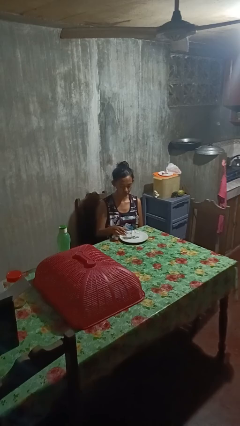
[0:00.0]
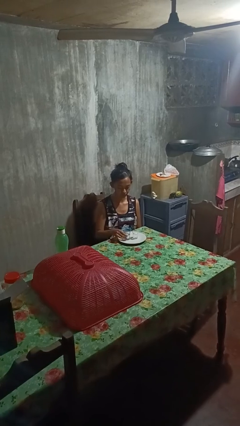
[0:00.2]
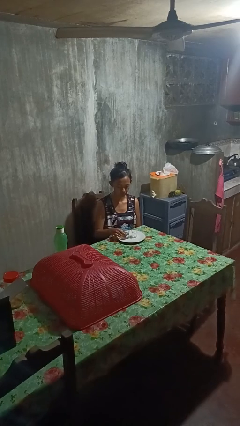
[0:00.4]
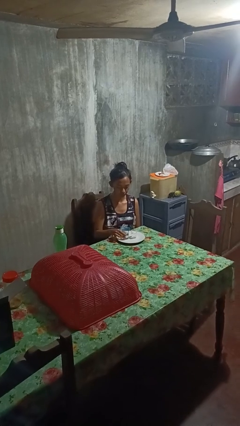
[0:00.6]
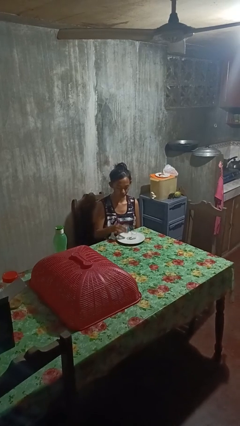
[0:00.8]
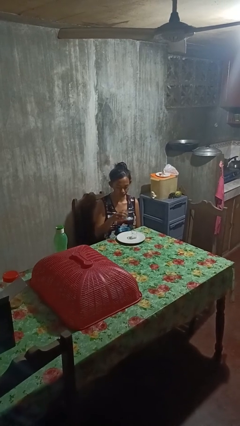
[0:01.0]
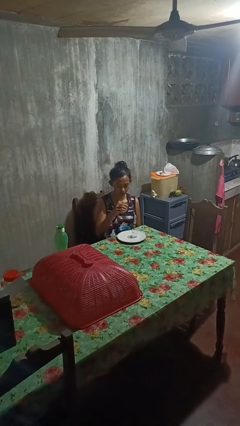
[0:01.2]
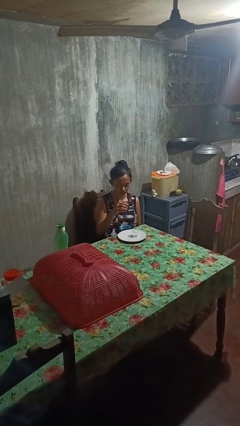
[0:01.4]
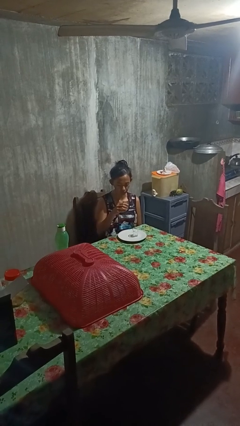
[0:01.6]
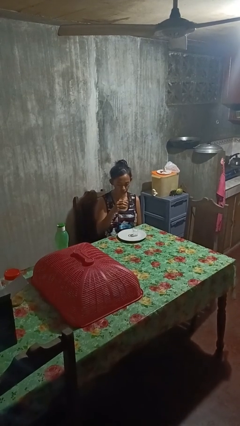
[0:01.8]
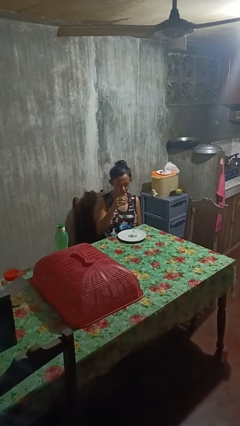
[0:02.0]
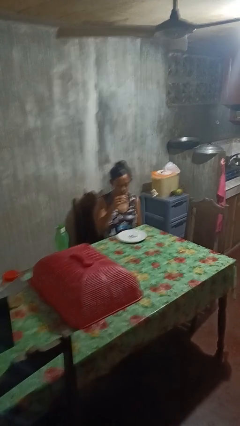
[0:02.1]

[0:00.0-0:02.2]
person picks up object from table

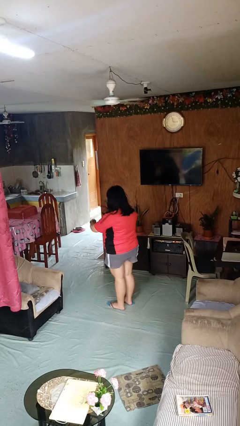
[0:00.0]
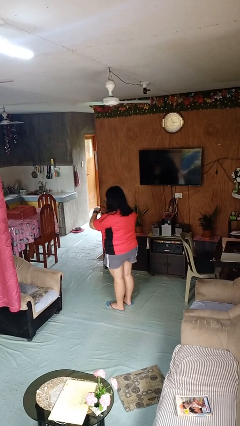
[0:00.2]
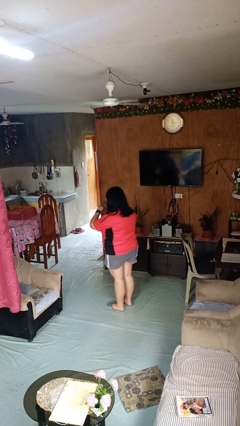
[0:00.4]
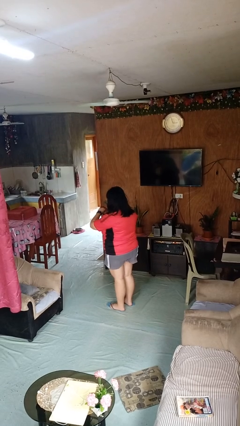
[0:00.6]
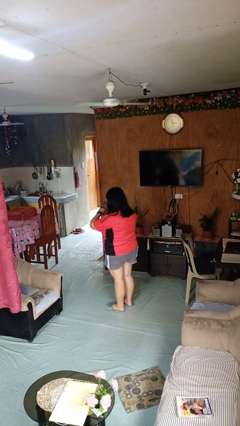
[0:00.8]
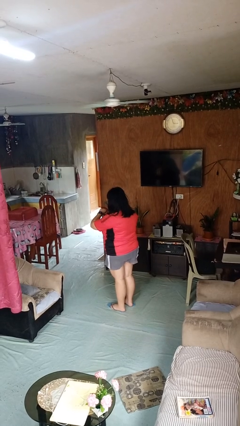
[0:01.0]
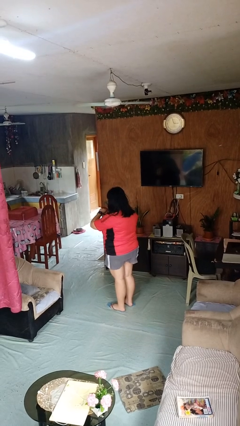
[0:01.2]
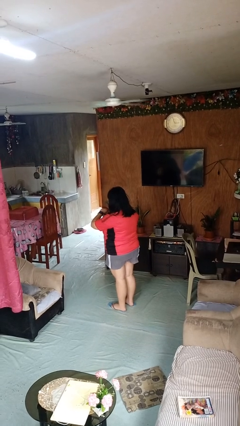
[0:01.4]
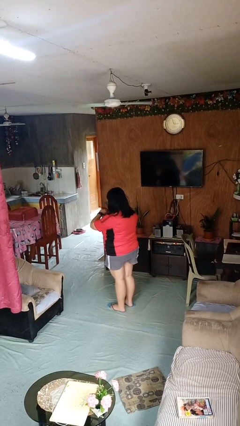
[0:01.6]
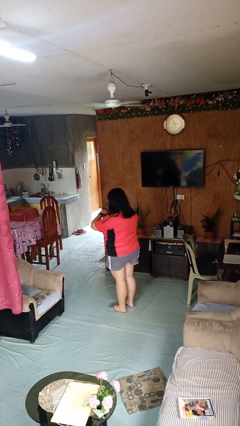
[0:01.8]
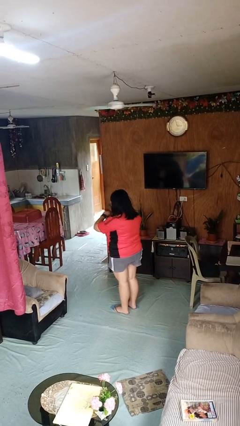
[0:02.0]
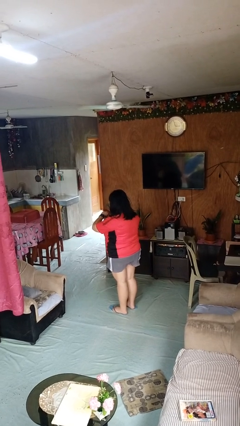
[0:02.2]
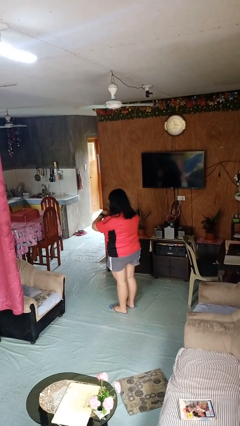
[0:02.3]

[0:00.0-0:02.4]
person looks at wristwatch

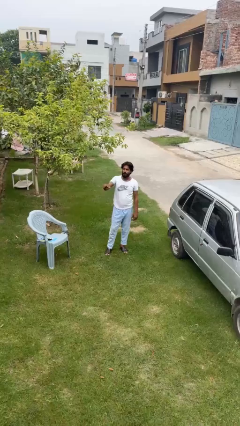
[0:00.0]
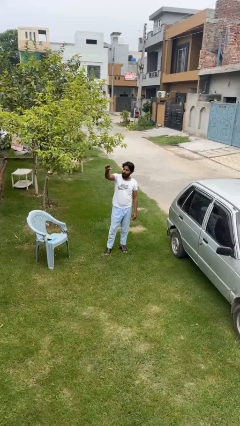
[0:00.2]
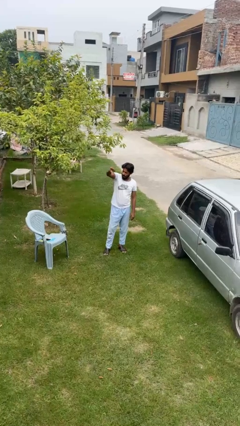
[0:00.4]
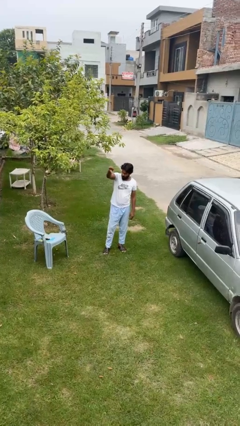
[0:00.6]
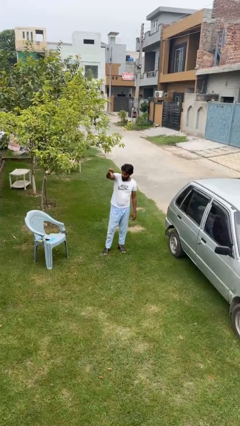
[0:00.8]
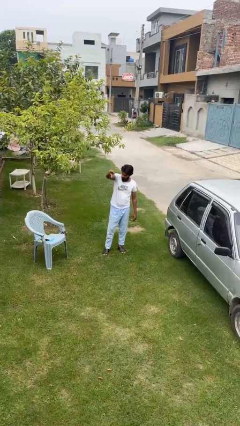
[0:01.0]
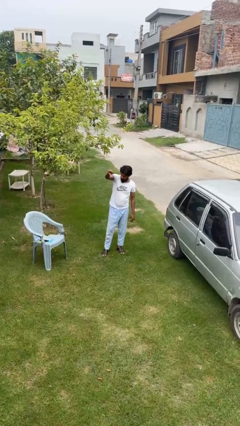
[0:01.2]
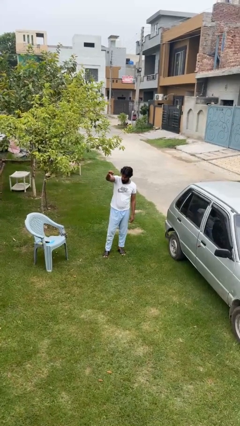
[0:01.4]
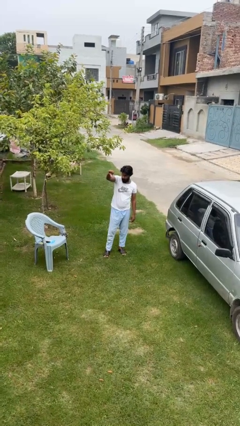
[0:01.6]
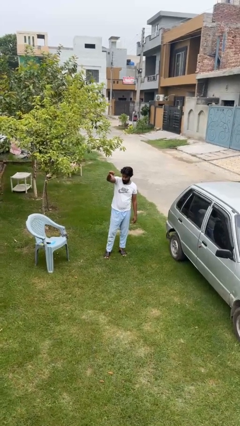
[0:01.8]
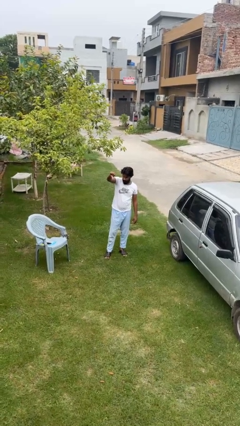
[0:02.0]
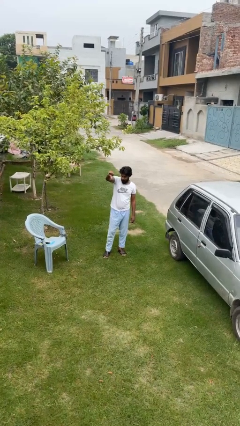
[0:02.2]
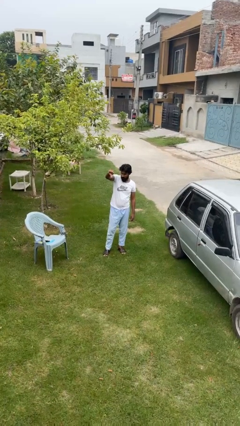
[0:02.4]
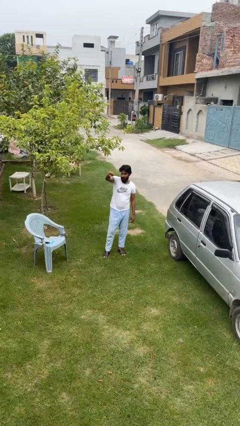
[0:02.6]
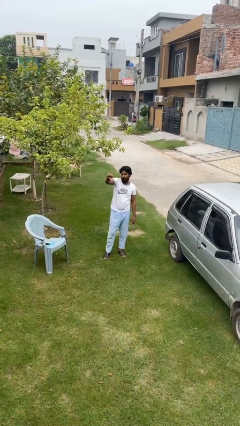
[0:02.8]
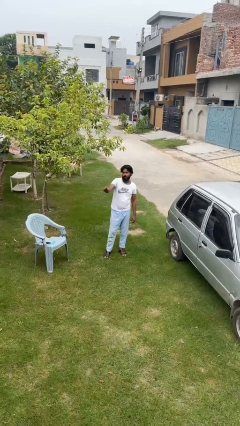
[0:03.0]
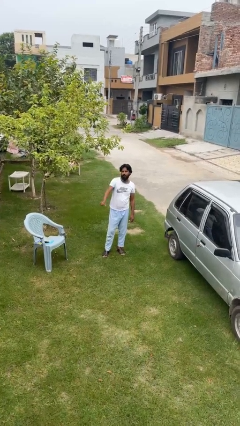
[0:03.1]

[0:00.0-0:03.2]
person gestures thumbs down

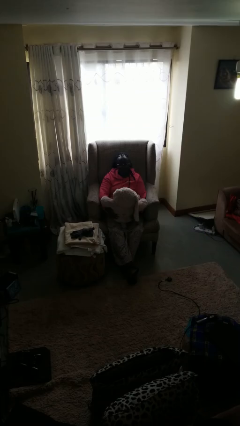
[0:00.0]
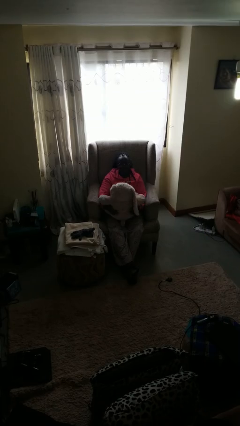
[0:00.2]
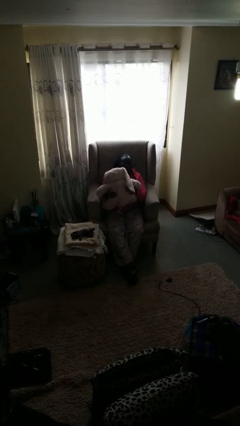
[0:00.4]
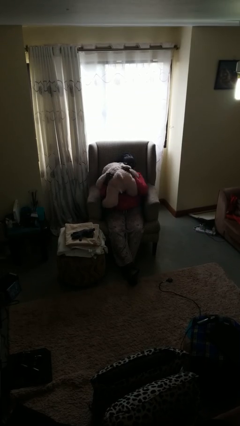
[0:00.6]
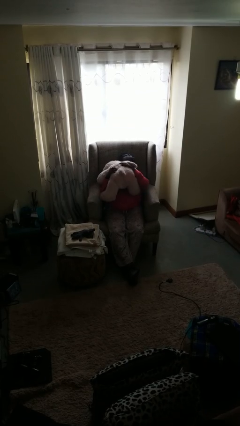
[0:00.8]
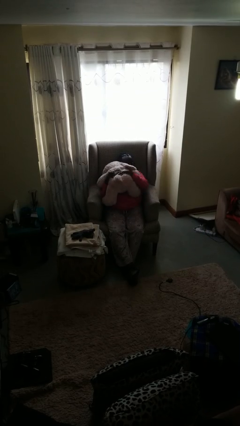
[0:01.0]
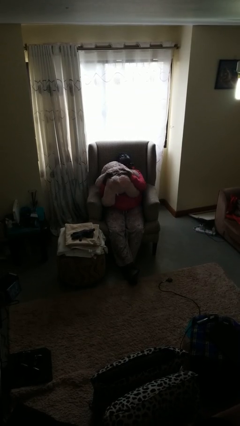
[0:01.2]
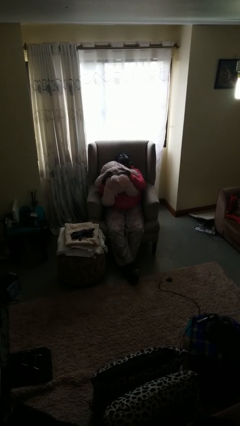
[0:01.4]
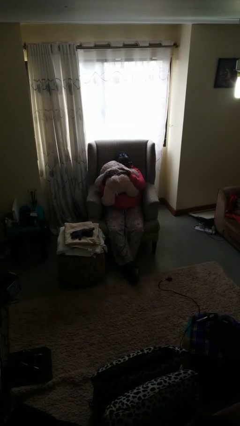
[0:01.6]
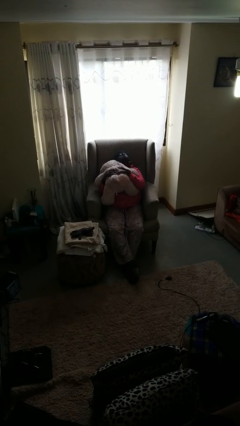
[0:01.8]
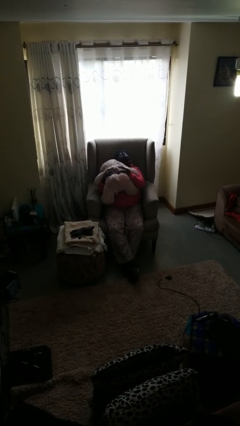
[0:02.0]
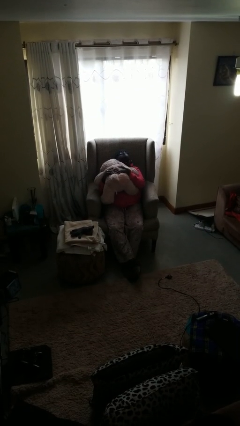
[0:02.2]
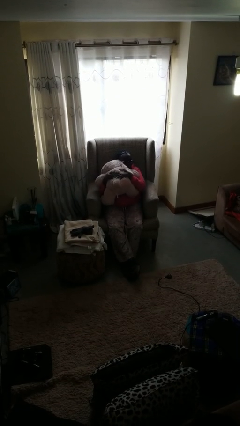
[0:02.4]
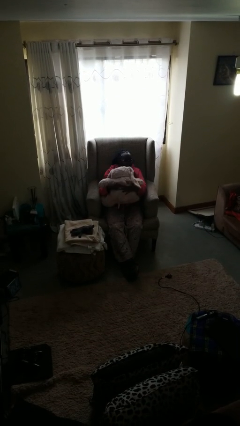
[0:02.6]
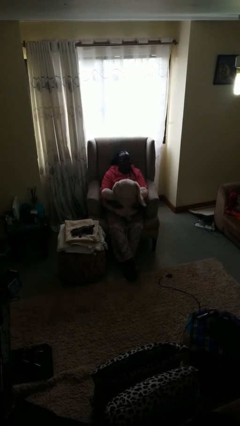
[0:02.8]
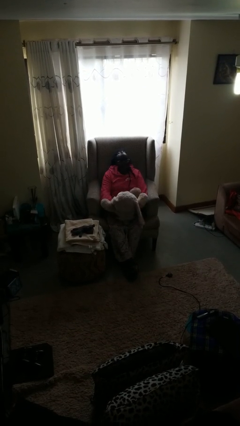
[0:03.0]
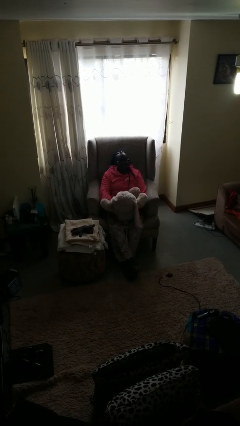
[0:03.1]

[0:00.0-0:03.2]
person hugs stuffed animal

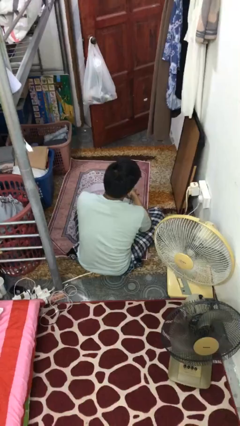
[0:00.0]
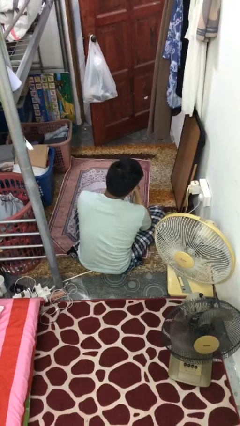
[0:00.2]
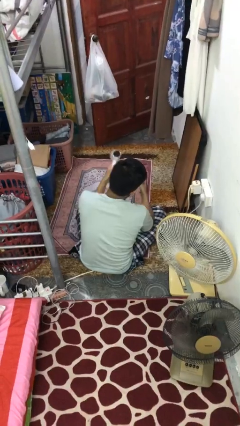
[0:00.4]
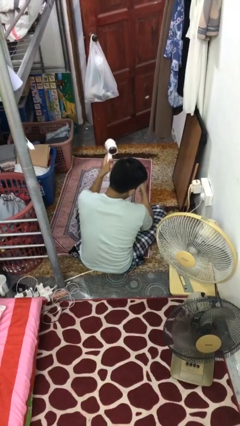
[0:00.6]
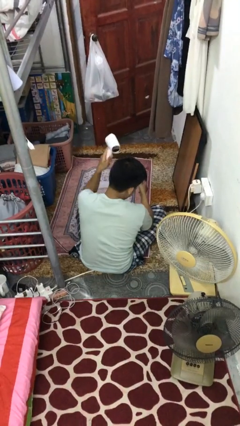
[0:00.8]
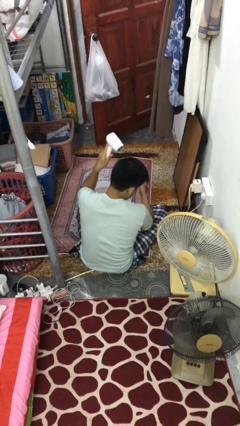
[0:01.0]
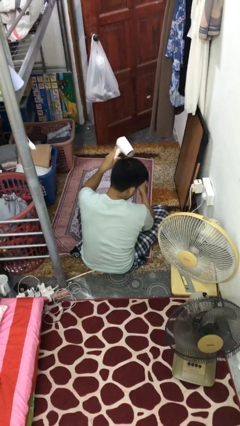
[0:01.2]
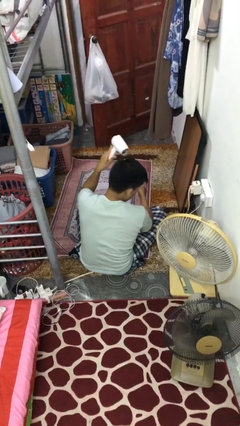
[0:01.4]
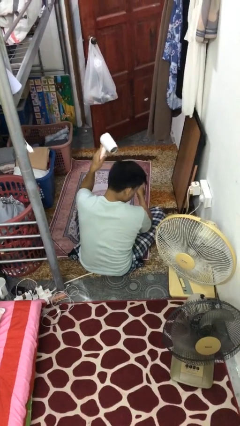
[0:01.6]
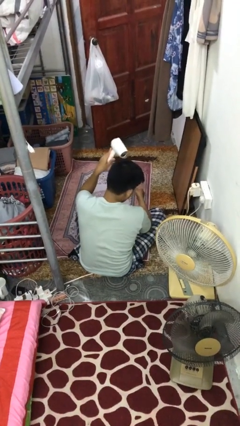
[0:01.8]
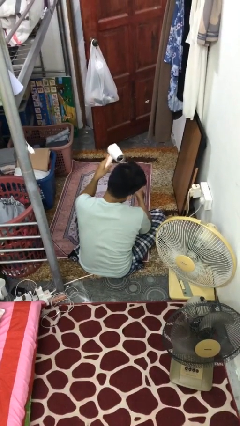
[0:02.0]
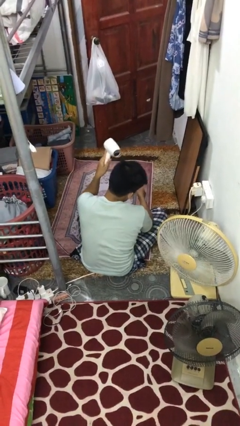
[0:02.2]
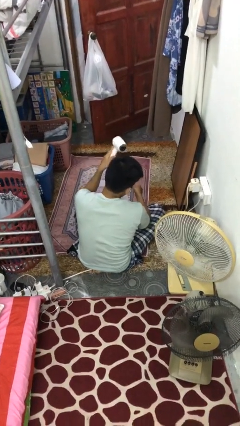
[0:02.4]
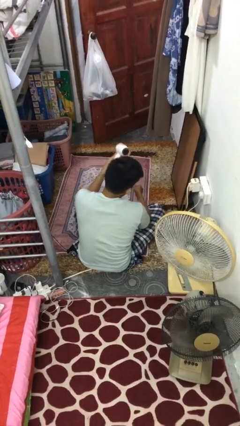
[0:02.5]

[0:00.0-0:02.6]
person dries hair with hairdryer

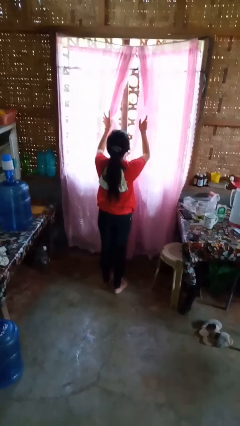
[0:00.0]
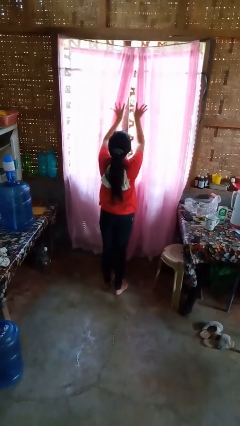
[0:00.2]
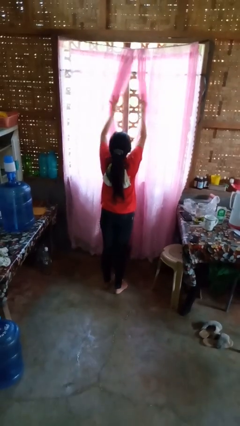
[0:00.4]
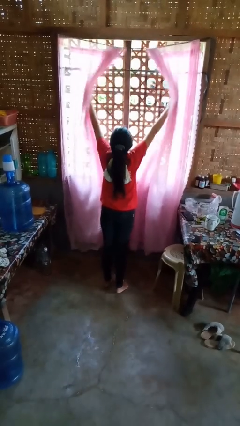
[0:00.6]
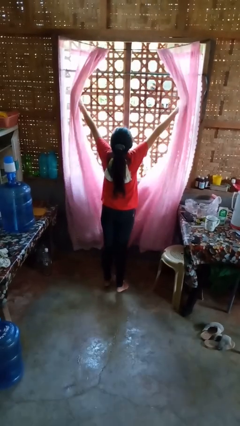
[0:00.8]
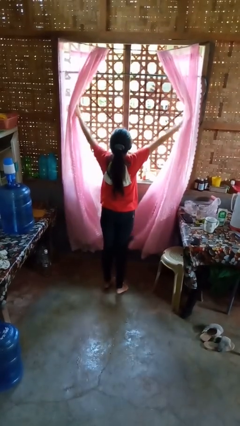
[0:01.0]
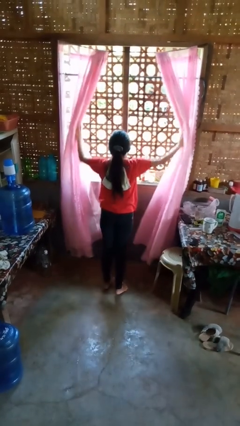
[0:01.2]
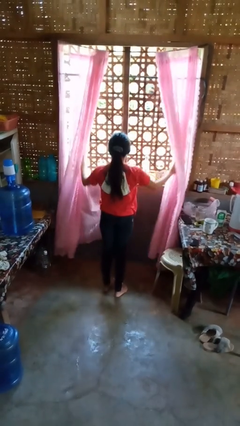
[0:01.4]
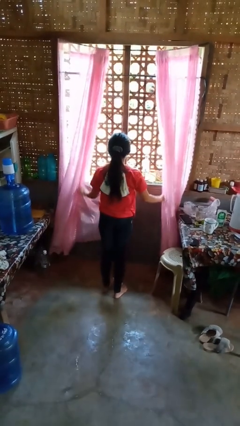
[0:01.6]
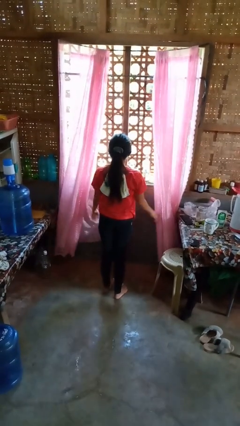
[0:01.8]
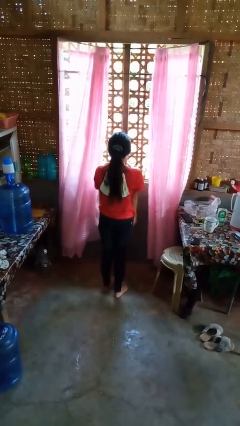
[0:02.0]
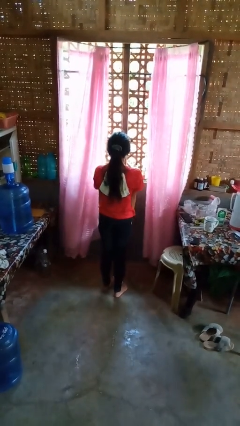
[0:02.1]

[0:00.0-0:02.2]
person opens curtains

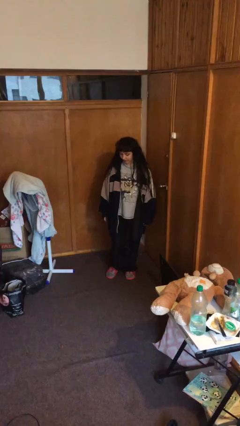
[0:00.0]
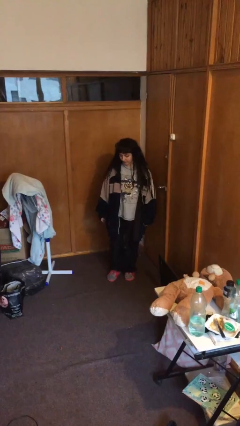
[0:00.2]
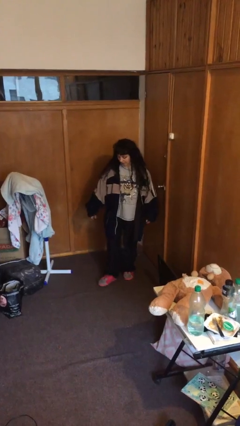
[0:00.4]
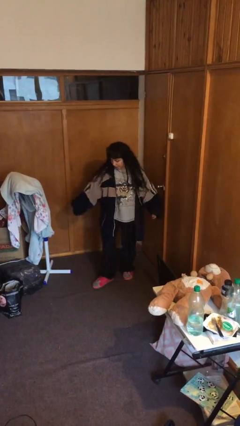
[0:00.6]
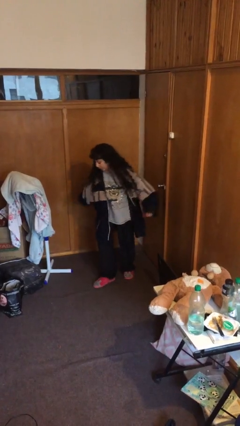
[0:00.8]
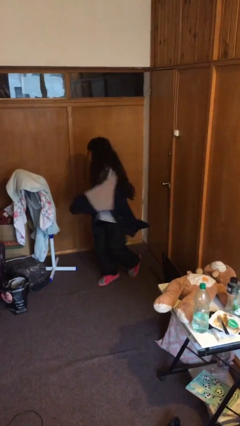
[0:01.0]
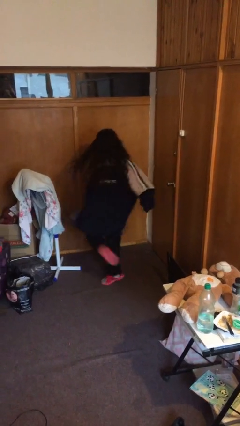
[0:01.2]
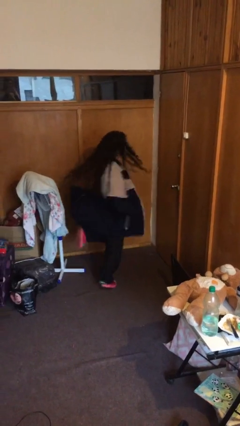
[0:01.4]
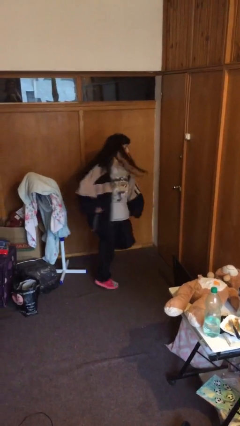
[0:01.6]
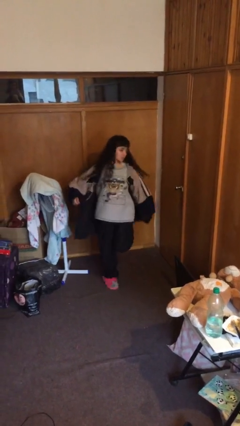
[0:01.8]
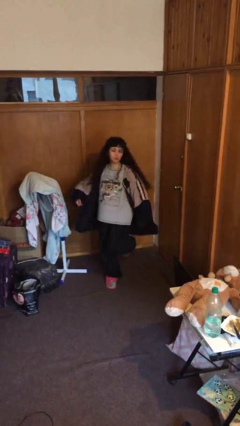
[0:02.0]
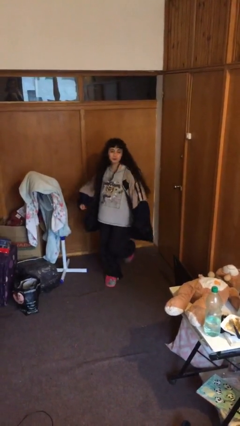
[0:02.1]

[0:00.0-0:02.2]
person twirls
